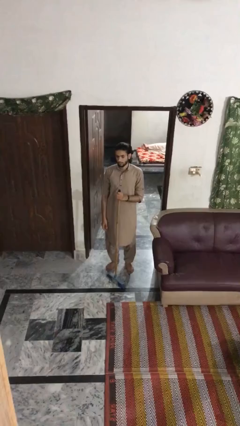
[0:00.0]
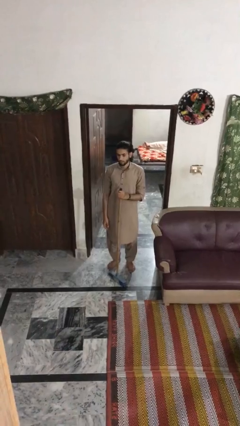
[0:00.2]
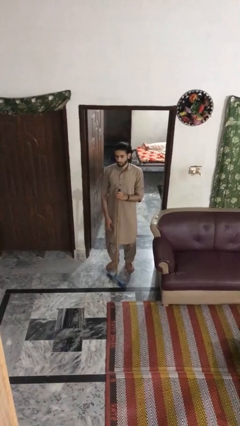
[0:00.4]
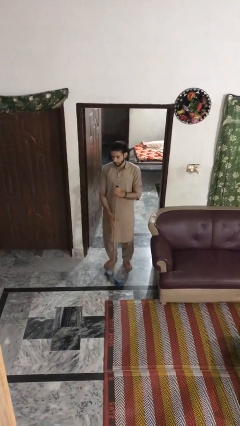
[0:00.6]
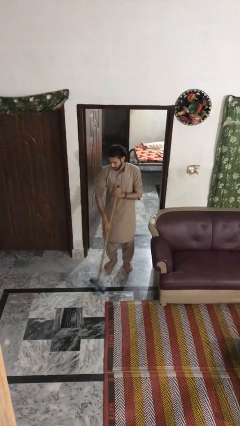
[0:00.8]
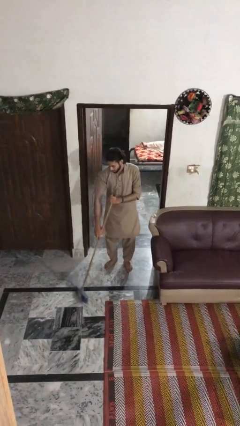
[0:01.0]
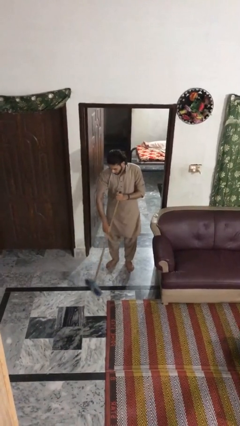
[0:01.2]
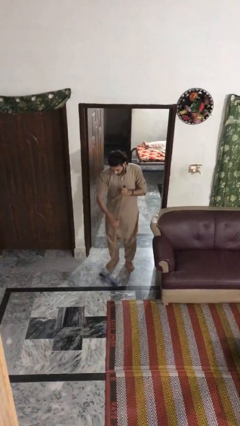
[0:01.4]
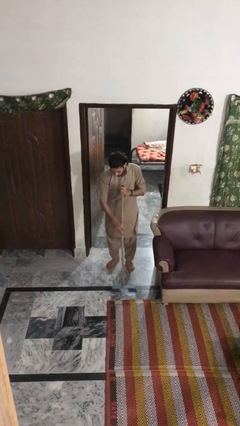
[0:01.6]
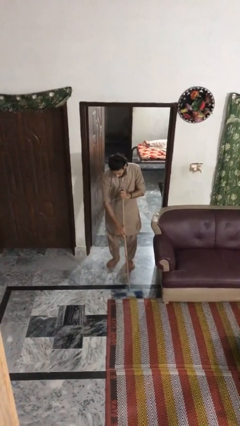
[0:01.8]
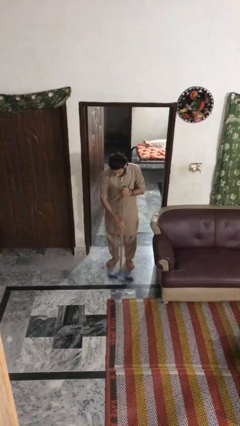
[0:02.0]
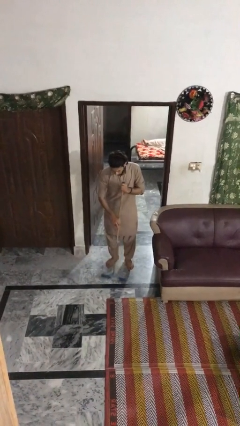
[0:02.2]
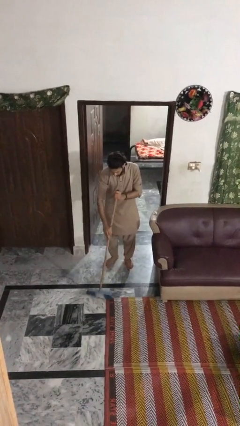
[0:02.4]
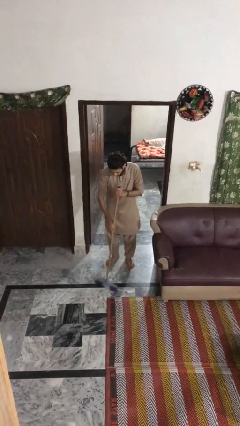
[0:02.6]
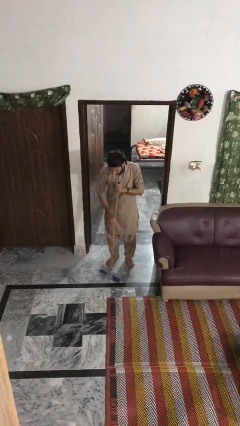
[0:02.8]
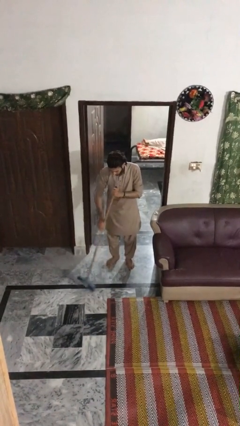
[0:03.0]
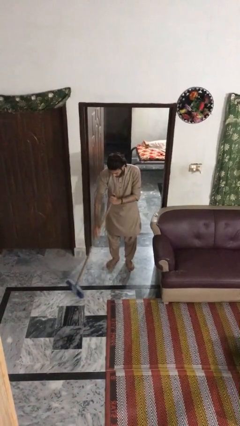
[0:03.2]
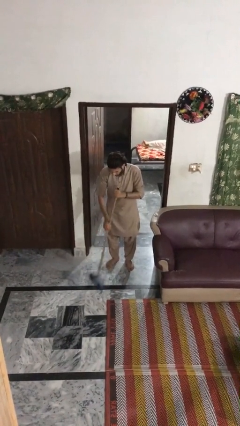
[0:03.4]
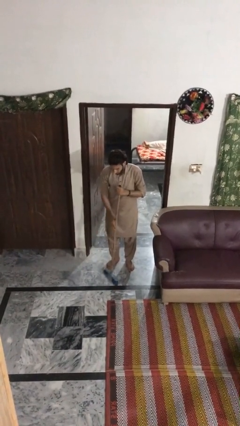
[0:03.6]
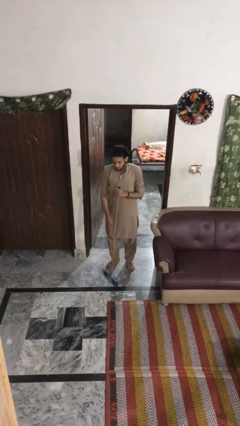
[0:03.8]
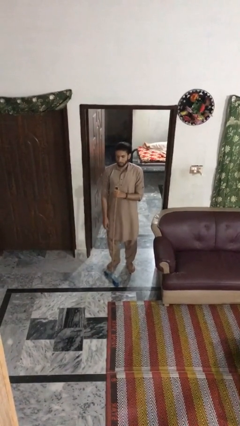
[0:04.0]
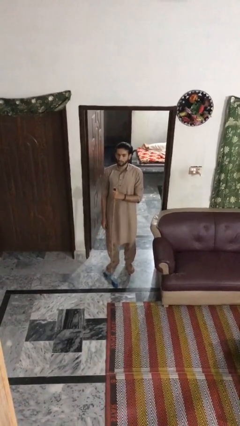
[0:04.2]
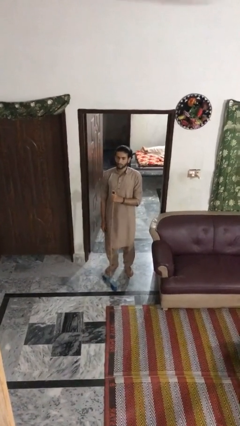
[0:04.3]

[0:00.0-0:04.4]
person sweeps floor

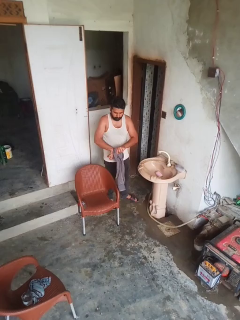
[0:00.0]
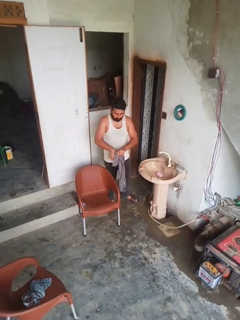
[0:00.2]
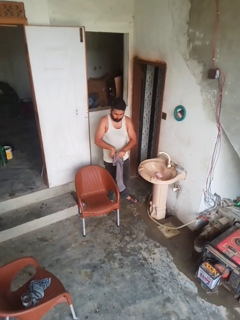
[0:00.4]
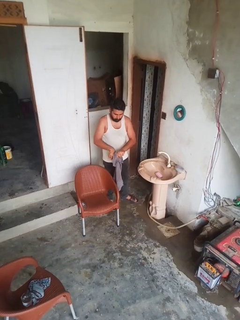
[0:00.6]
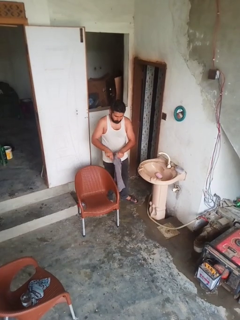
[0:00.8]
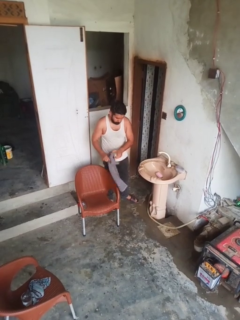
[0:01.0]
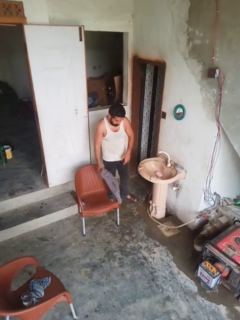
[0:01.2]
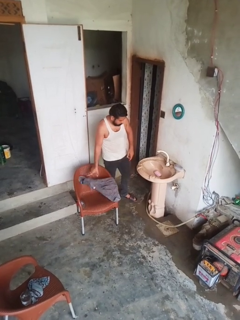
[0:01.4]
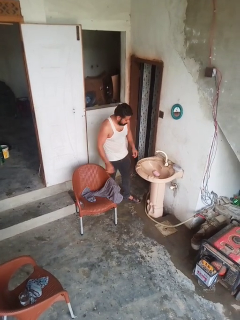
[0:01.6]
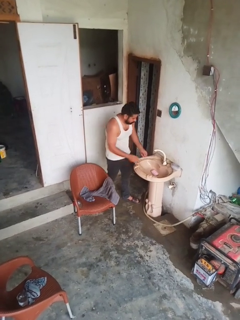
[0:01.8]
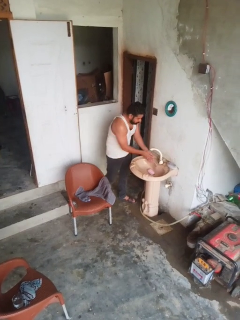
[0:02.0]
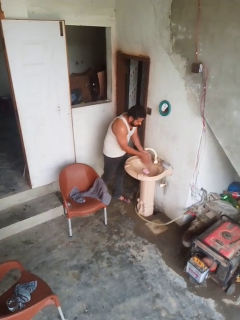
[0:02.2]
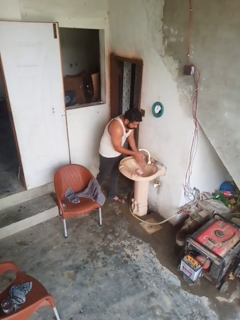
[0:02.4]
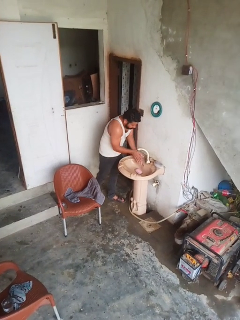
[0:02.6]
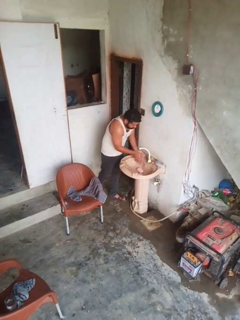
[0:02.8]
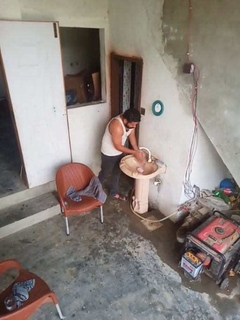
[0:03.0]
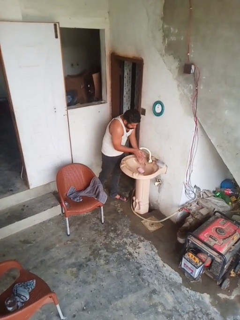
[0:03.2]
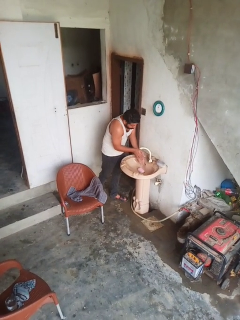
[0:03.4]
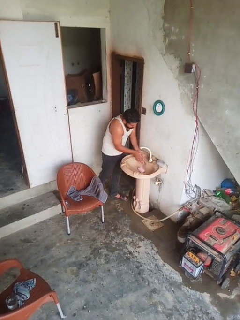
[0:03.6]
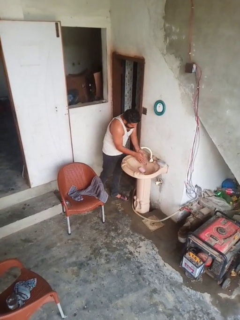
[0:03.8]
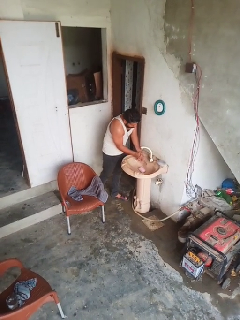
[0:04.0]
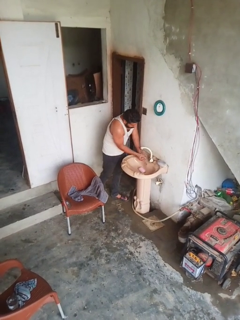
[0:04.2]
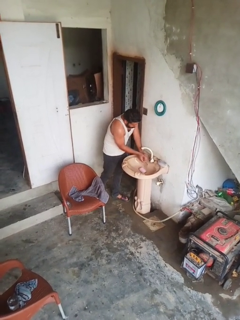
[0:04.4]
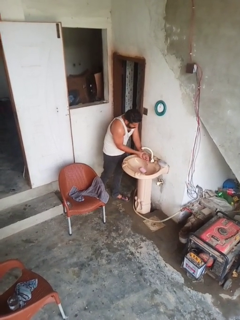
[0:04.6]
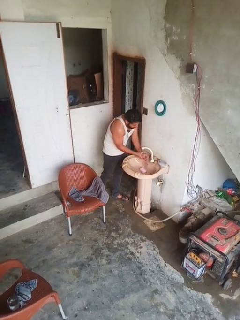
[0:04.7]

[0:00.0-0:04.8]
person washes hands

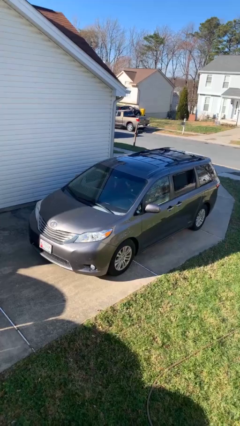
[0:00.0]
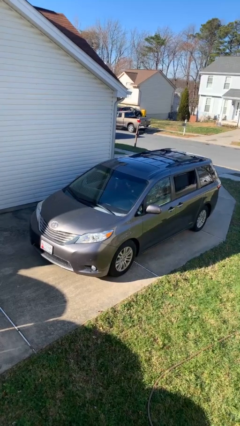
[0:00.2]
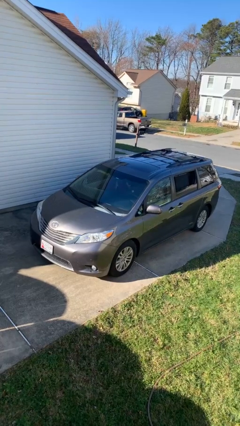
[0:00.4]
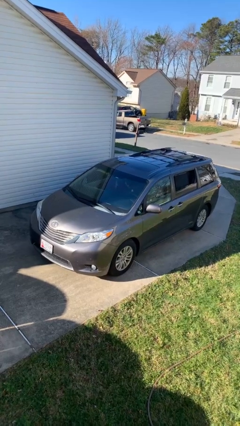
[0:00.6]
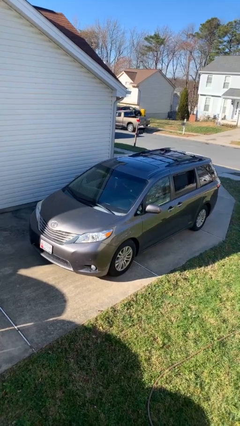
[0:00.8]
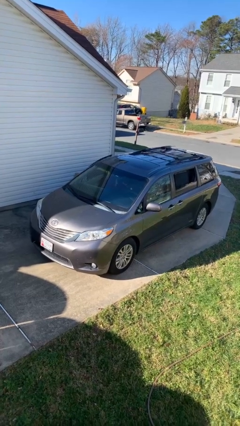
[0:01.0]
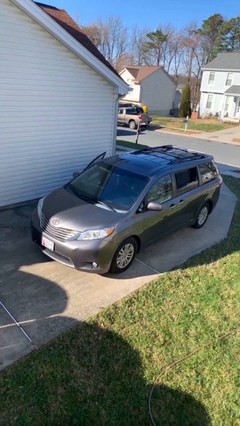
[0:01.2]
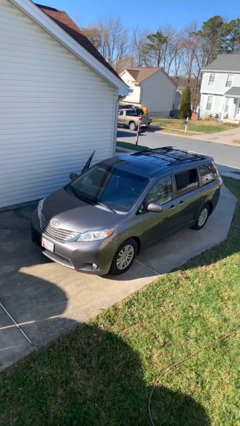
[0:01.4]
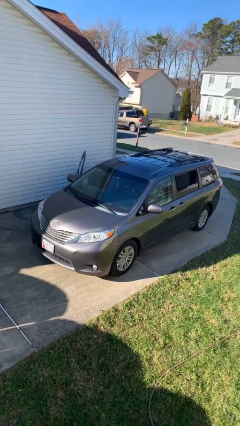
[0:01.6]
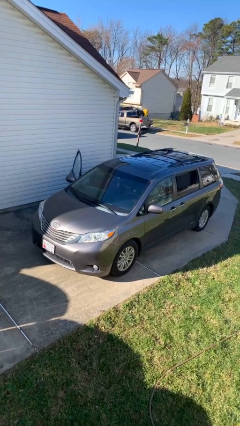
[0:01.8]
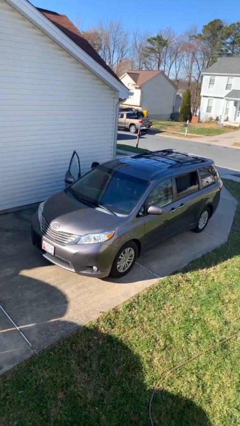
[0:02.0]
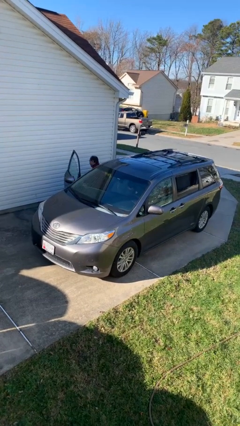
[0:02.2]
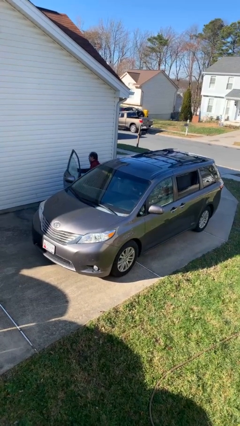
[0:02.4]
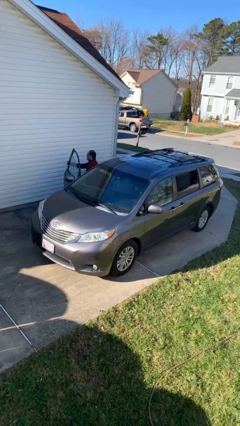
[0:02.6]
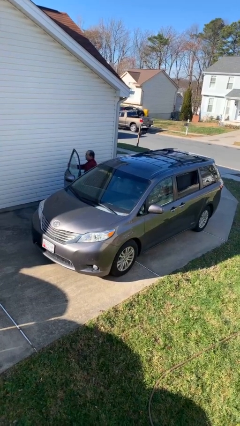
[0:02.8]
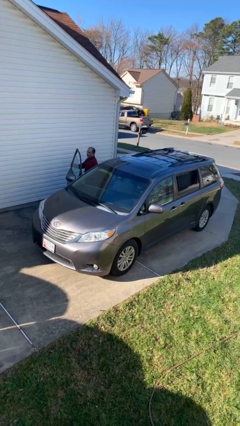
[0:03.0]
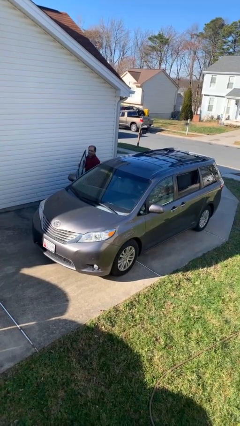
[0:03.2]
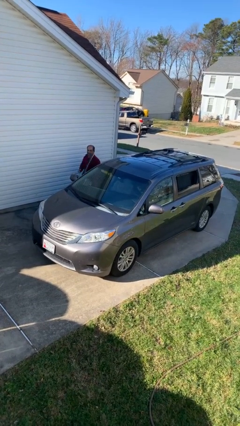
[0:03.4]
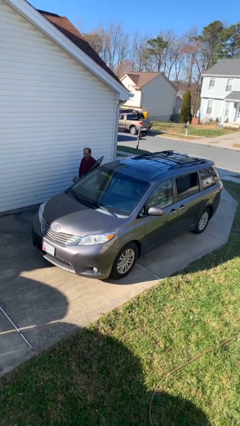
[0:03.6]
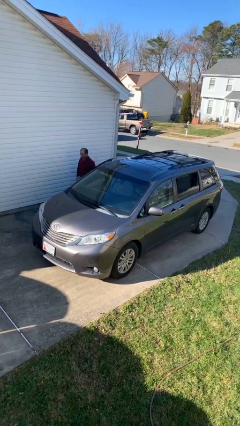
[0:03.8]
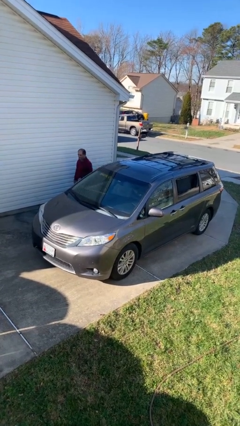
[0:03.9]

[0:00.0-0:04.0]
car drops off person

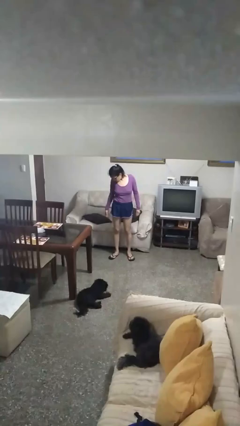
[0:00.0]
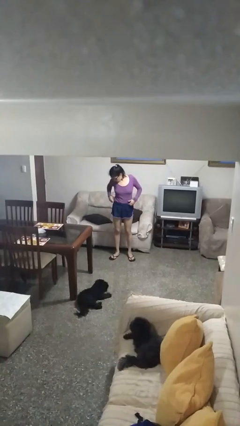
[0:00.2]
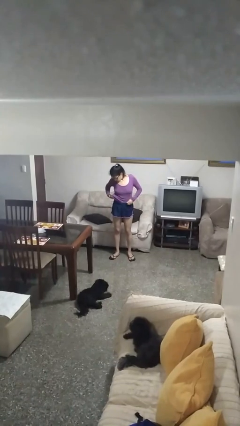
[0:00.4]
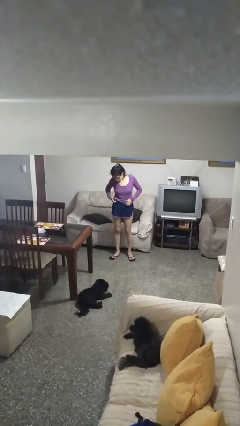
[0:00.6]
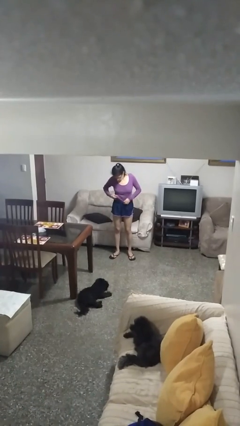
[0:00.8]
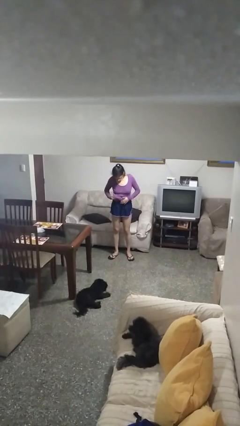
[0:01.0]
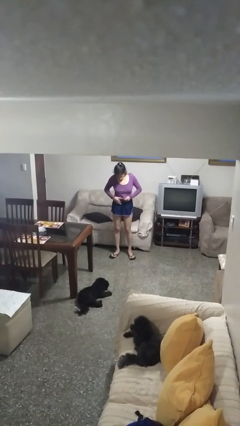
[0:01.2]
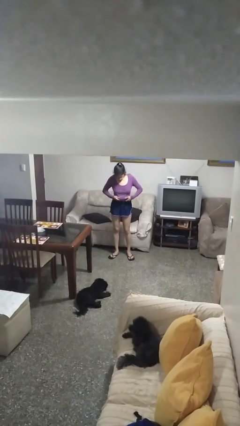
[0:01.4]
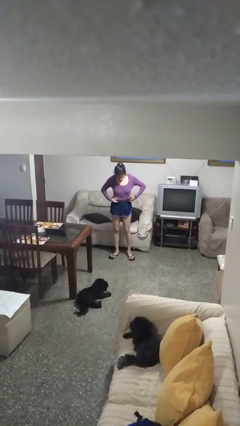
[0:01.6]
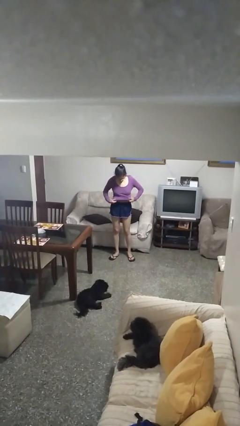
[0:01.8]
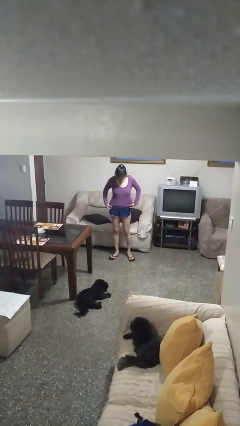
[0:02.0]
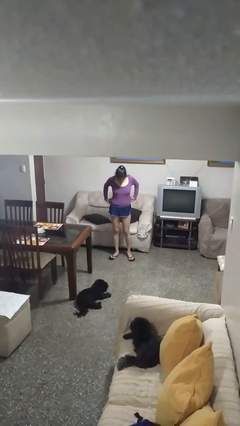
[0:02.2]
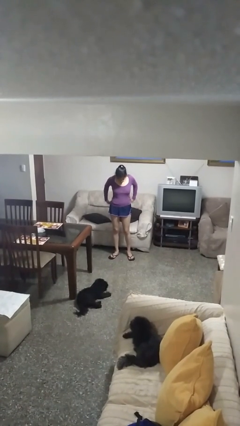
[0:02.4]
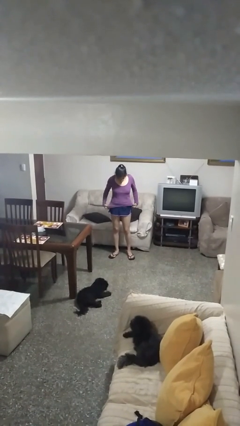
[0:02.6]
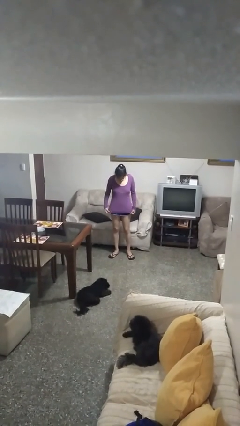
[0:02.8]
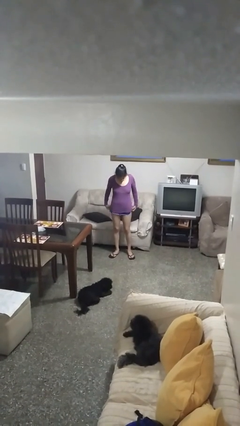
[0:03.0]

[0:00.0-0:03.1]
person untucks shirt

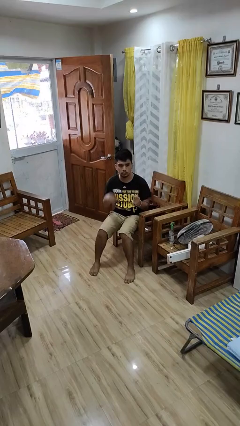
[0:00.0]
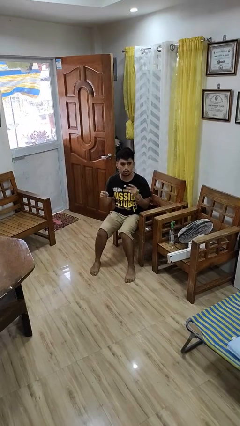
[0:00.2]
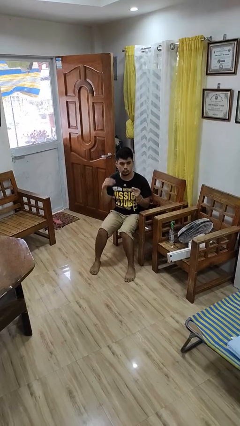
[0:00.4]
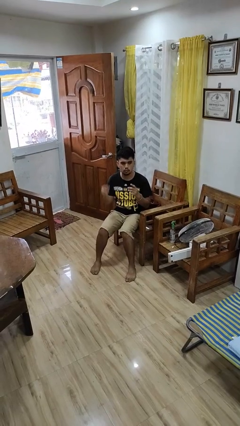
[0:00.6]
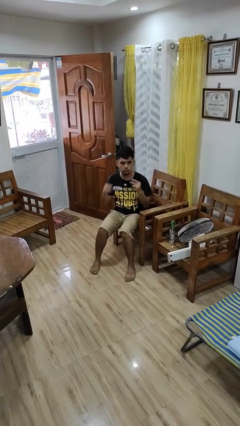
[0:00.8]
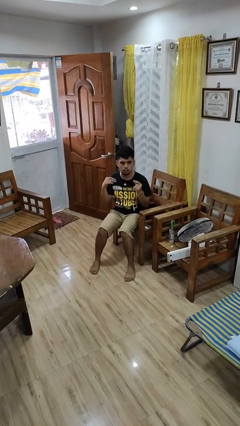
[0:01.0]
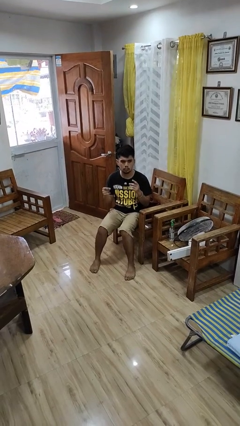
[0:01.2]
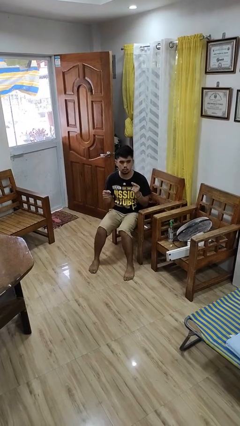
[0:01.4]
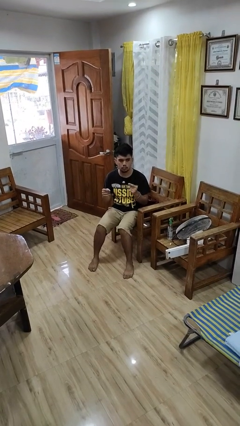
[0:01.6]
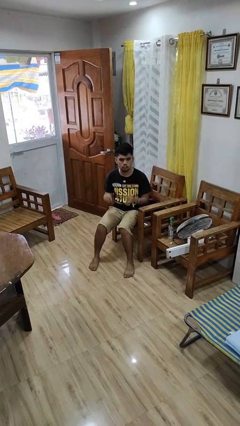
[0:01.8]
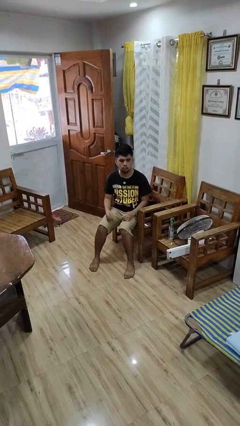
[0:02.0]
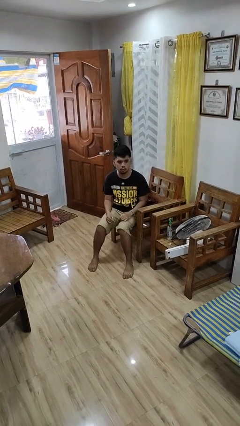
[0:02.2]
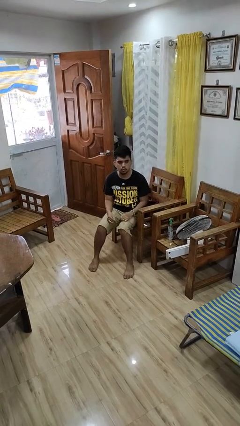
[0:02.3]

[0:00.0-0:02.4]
person snaps fingers
